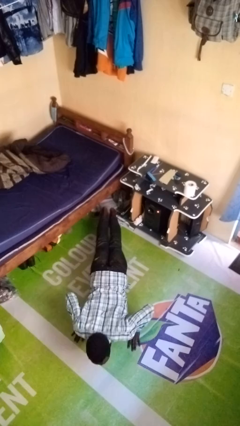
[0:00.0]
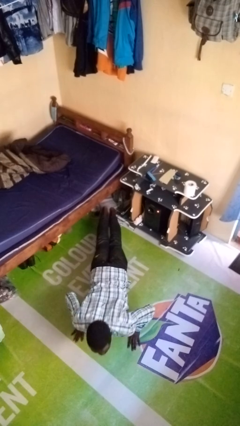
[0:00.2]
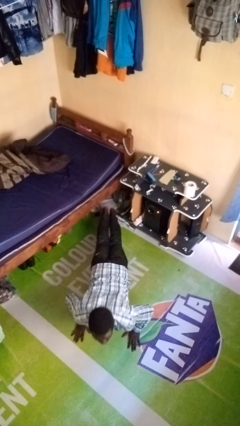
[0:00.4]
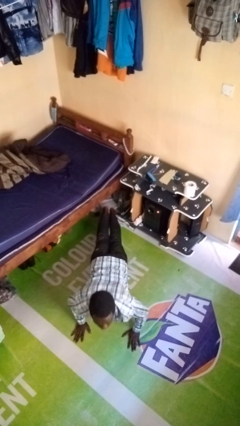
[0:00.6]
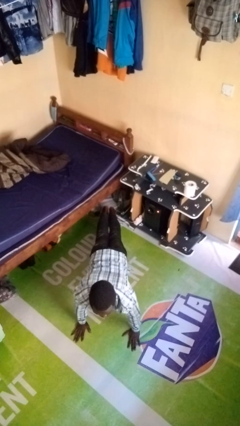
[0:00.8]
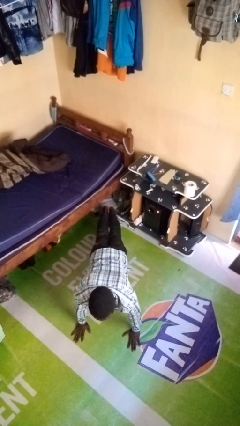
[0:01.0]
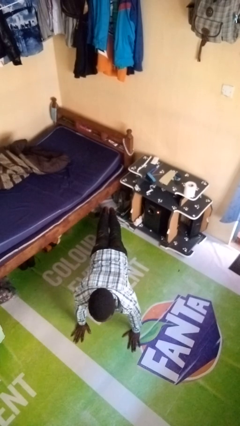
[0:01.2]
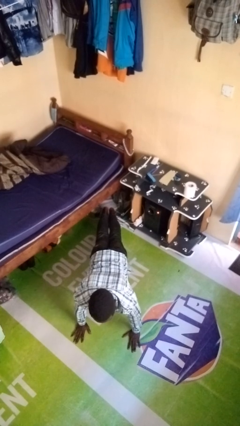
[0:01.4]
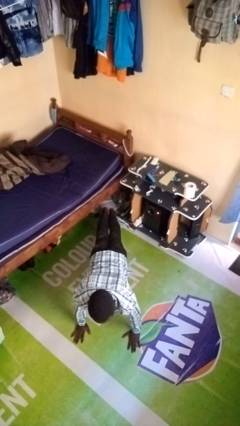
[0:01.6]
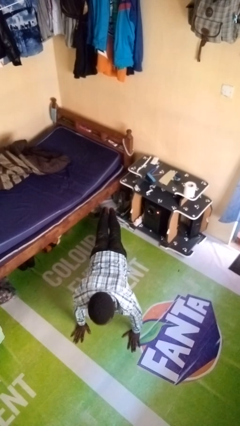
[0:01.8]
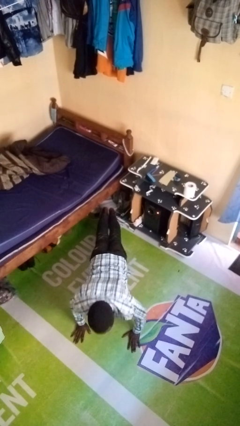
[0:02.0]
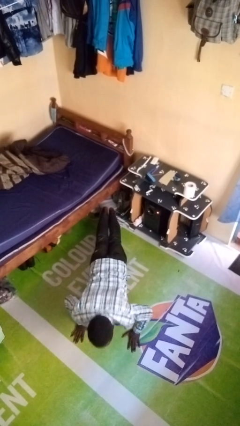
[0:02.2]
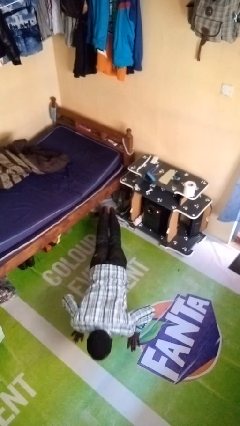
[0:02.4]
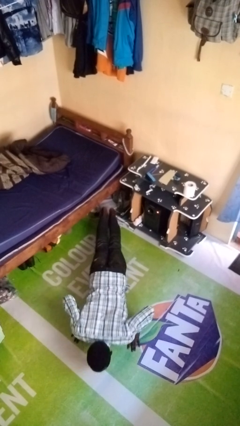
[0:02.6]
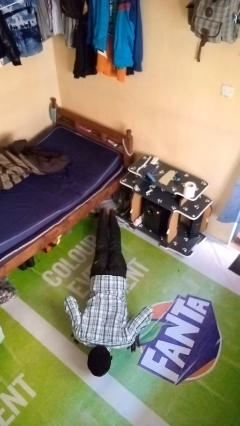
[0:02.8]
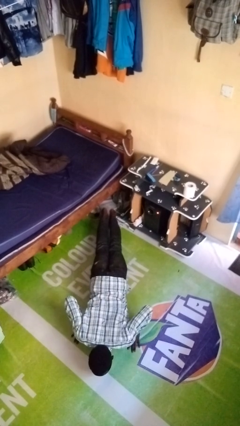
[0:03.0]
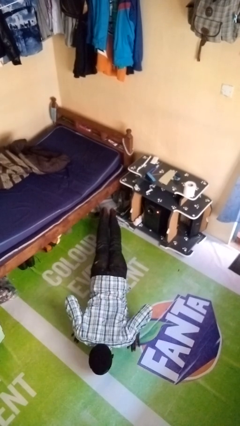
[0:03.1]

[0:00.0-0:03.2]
person exercises with pushup

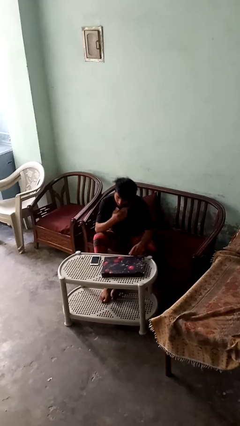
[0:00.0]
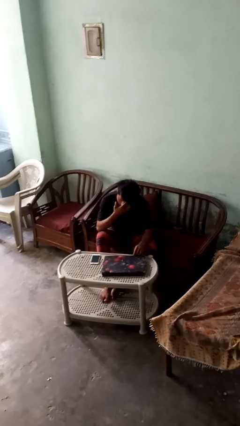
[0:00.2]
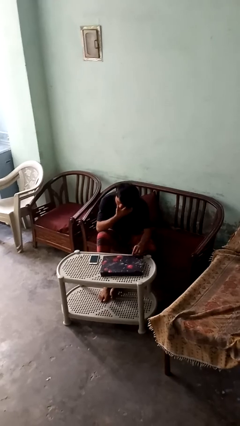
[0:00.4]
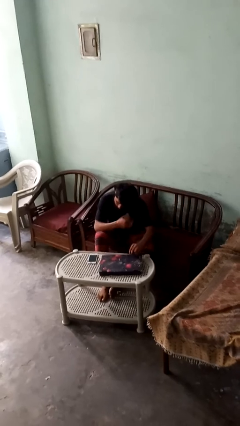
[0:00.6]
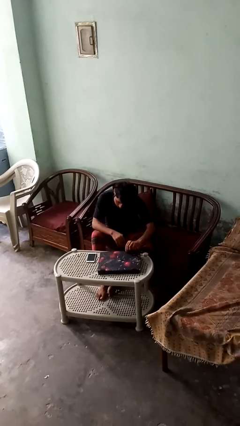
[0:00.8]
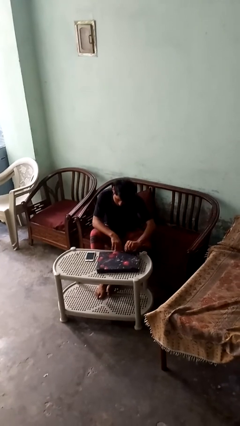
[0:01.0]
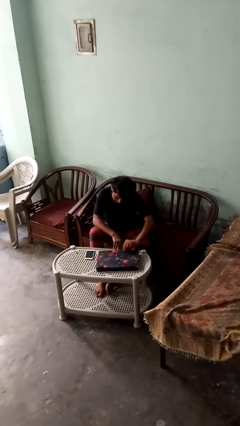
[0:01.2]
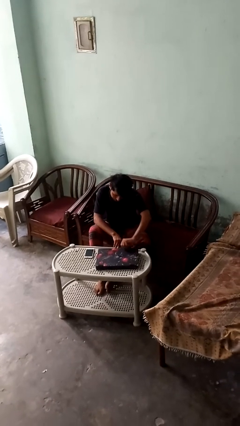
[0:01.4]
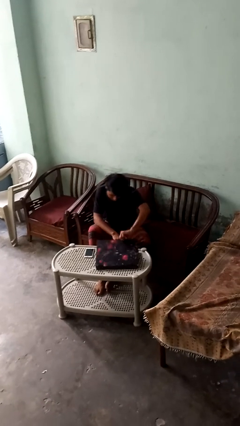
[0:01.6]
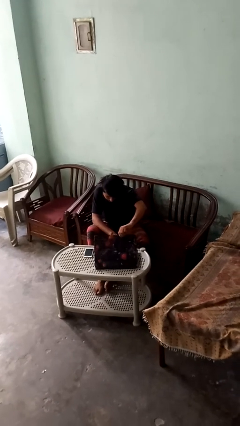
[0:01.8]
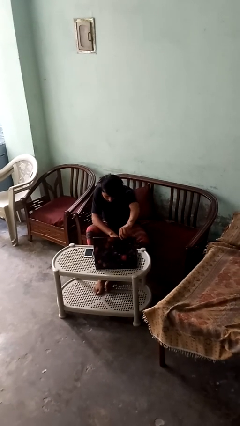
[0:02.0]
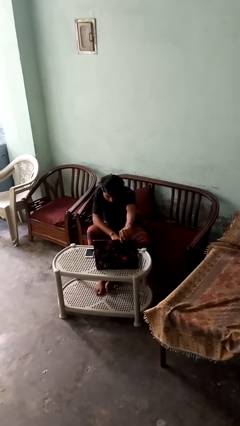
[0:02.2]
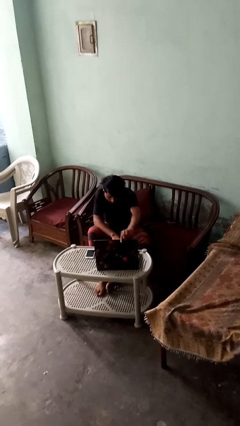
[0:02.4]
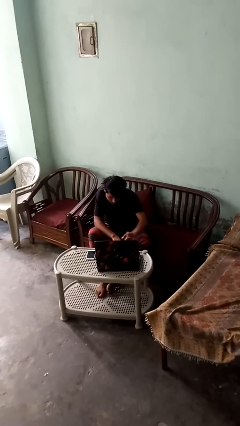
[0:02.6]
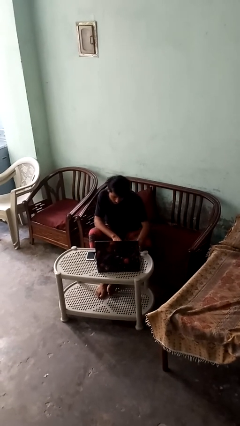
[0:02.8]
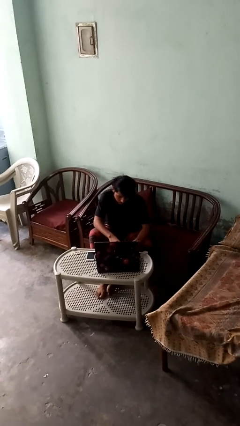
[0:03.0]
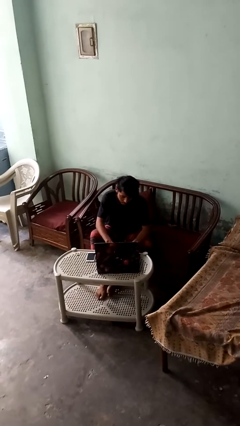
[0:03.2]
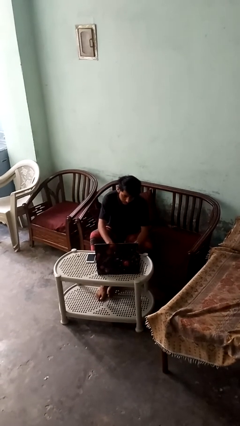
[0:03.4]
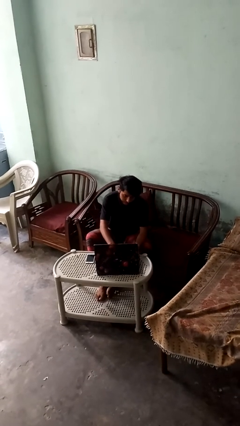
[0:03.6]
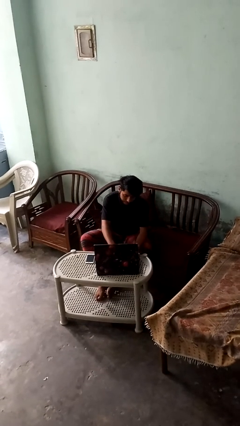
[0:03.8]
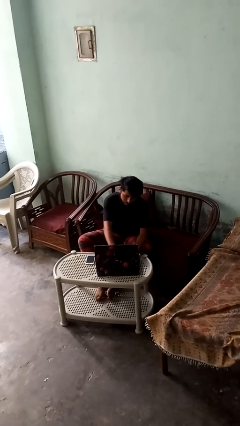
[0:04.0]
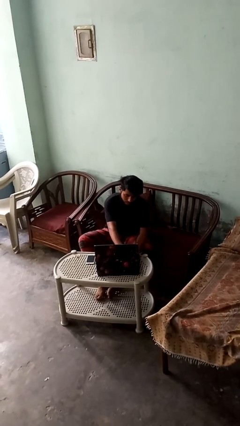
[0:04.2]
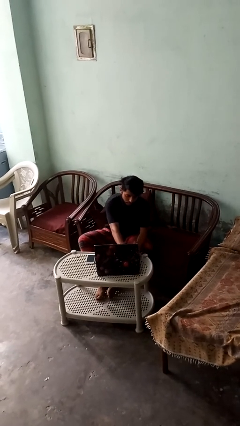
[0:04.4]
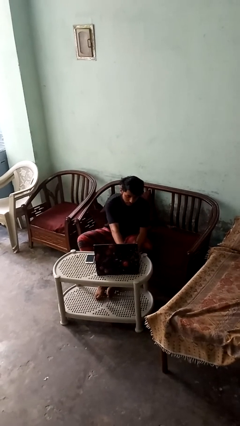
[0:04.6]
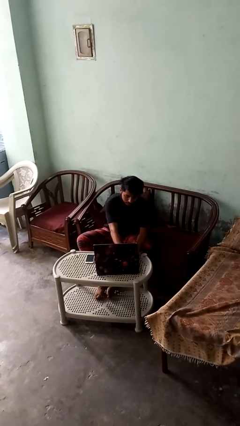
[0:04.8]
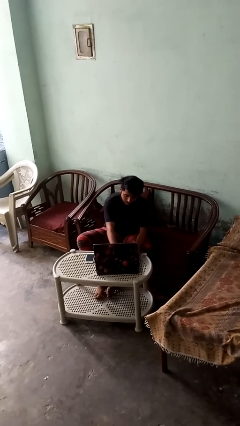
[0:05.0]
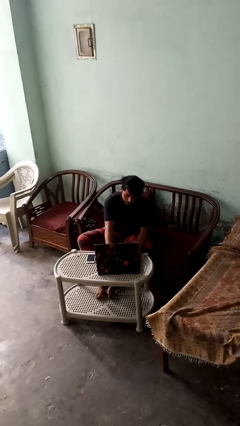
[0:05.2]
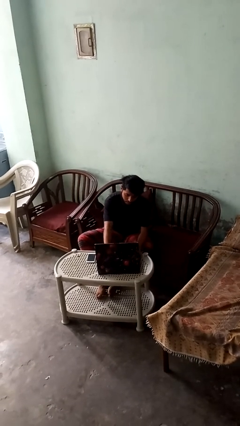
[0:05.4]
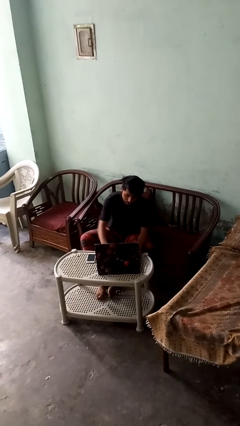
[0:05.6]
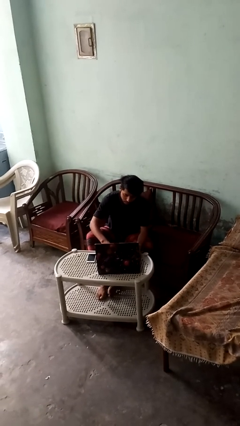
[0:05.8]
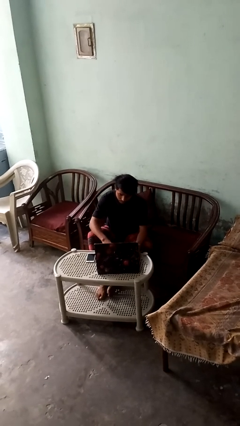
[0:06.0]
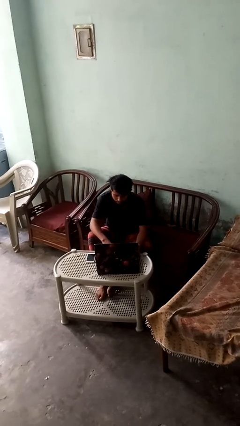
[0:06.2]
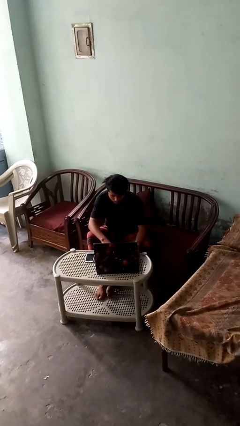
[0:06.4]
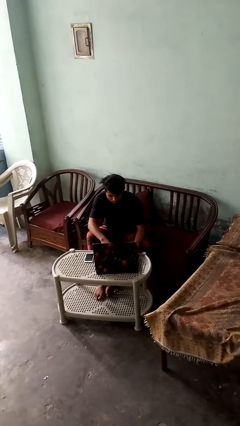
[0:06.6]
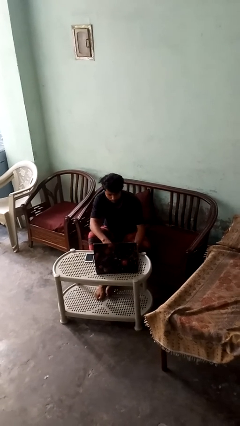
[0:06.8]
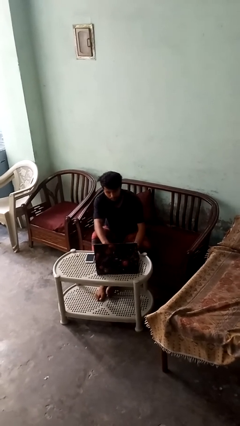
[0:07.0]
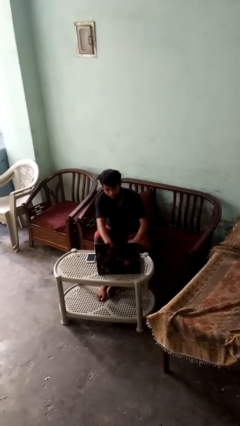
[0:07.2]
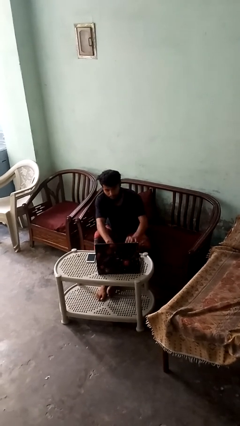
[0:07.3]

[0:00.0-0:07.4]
person opens laptop

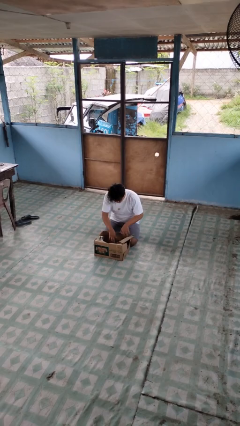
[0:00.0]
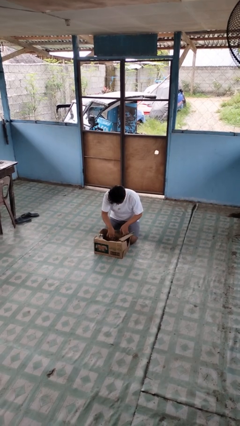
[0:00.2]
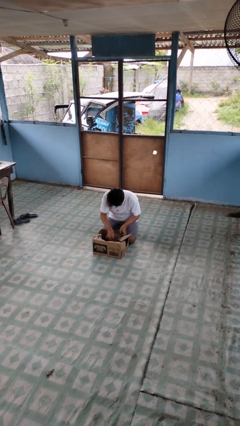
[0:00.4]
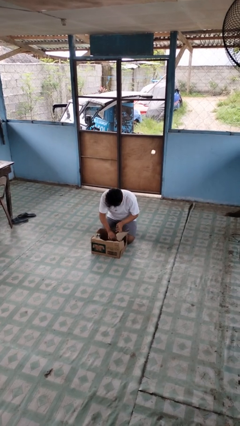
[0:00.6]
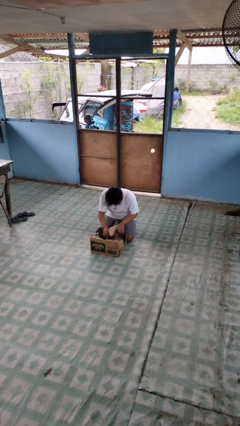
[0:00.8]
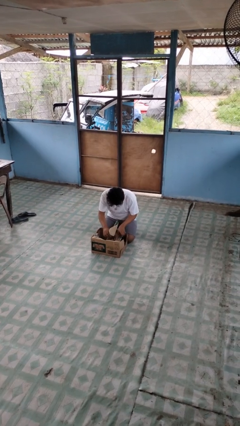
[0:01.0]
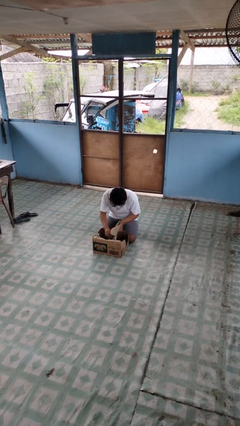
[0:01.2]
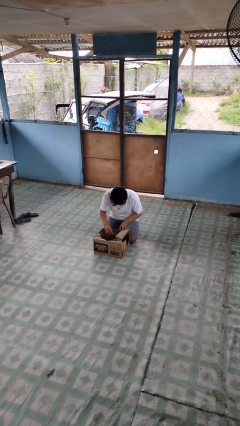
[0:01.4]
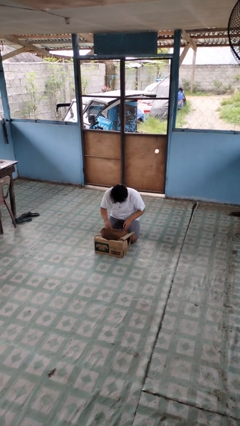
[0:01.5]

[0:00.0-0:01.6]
person searches in box

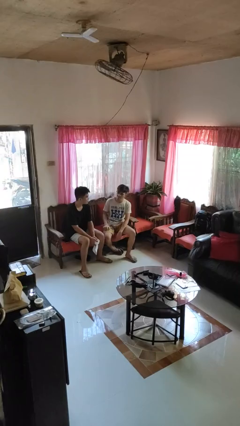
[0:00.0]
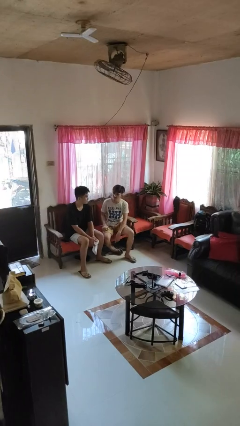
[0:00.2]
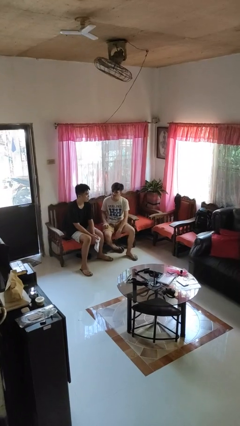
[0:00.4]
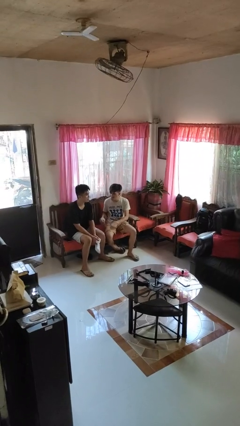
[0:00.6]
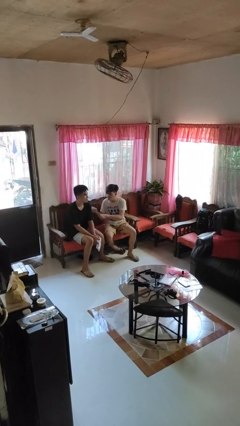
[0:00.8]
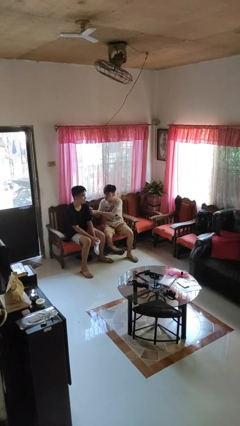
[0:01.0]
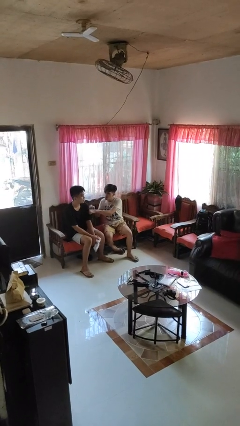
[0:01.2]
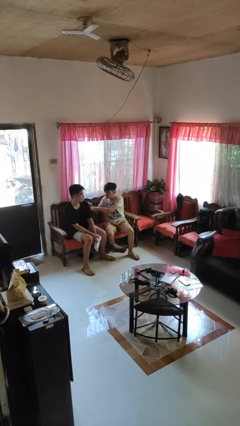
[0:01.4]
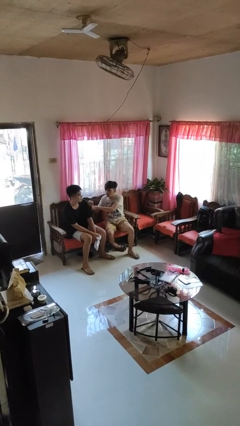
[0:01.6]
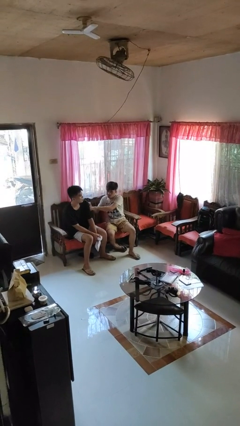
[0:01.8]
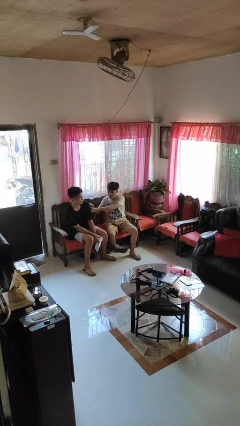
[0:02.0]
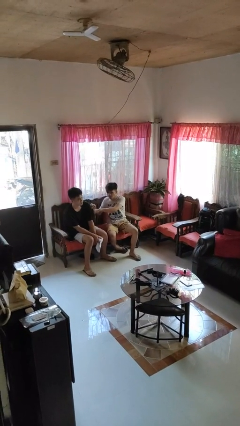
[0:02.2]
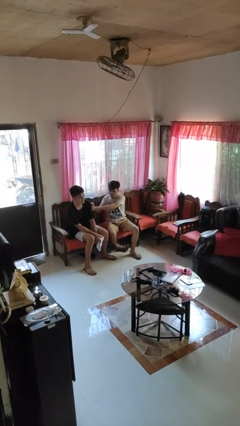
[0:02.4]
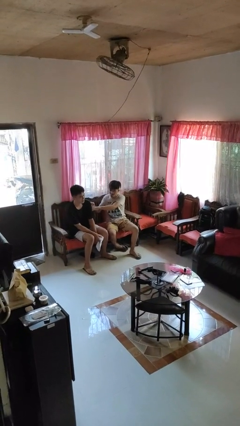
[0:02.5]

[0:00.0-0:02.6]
person pounds shoulders of person

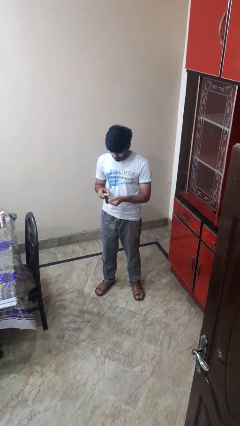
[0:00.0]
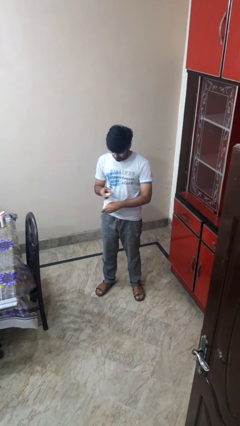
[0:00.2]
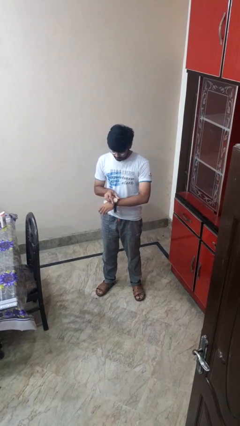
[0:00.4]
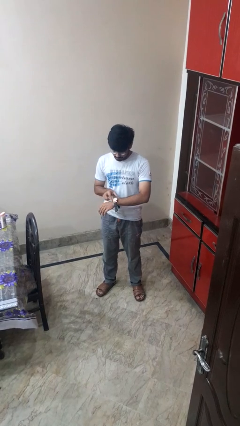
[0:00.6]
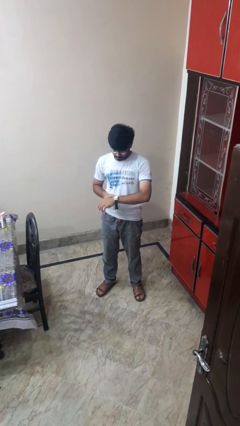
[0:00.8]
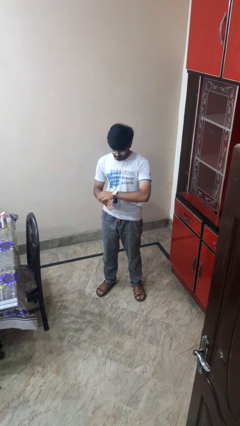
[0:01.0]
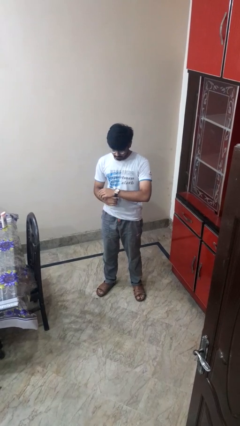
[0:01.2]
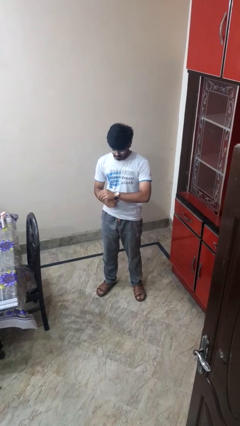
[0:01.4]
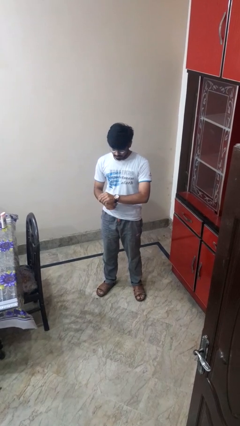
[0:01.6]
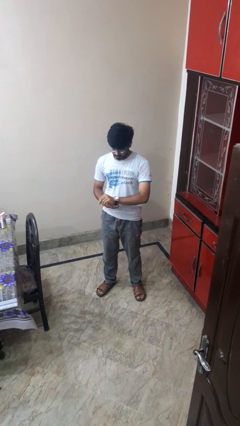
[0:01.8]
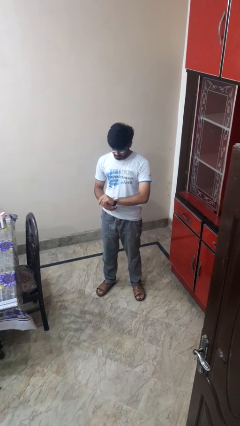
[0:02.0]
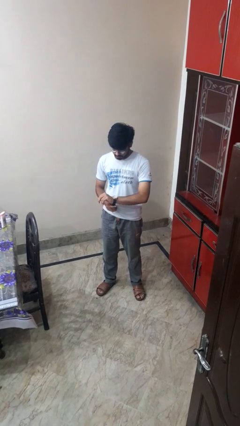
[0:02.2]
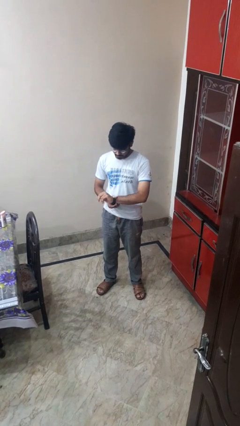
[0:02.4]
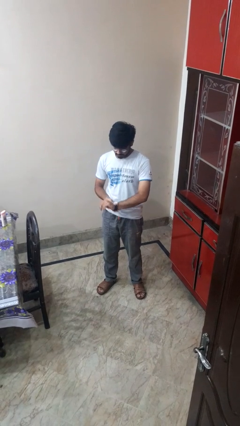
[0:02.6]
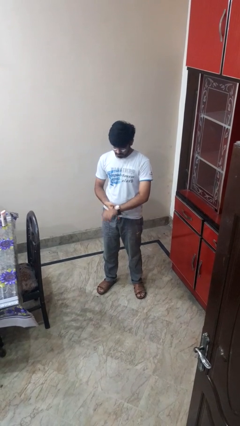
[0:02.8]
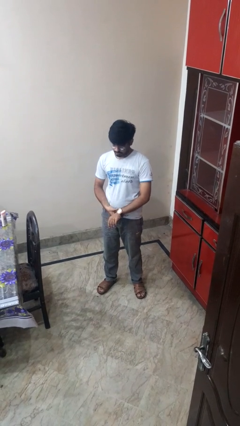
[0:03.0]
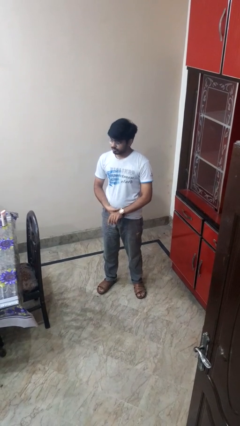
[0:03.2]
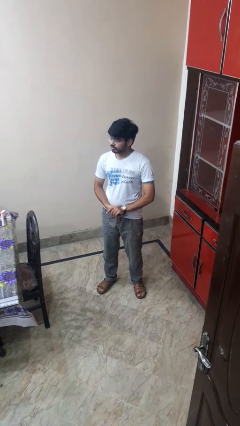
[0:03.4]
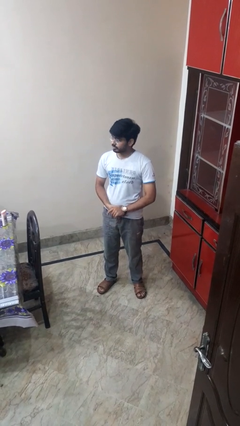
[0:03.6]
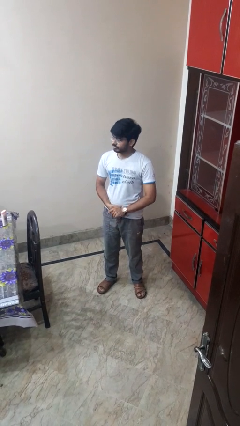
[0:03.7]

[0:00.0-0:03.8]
person puts on wristwatch
